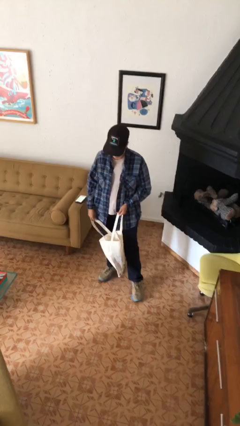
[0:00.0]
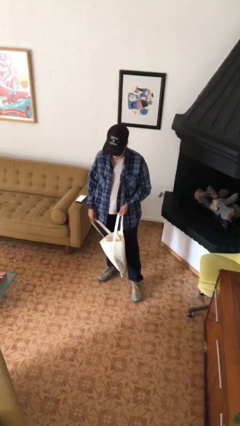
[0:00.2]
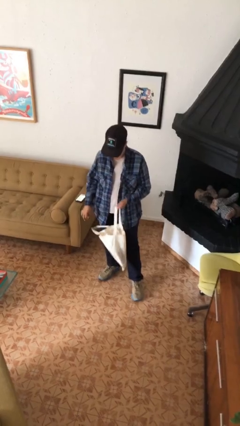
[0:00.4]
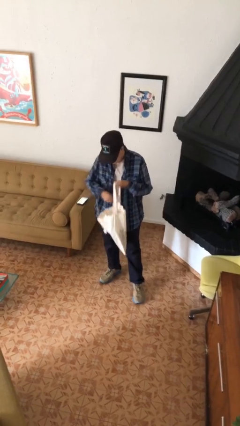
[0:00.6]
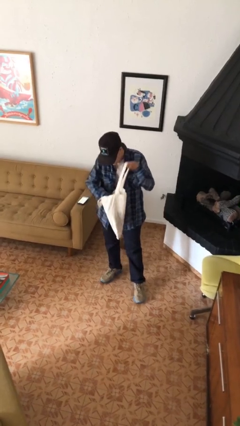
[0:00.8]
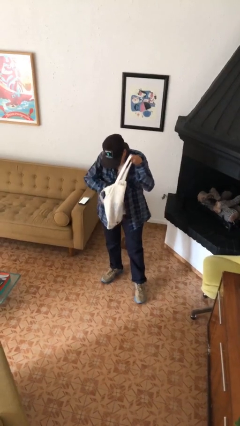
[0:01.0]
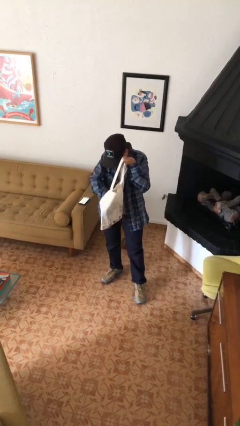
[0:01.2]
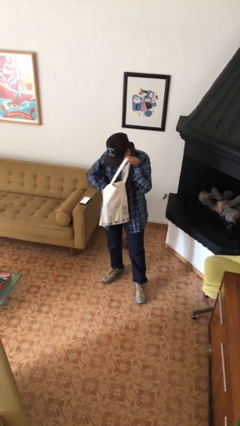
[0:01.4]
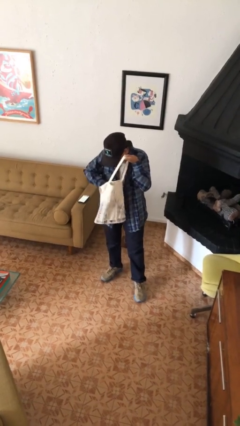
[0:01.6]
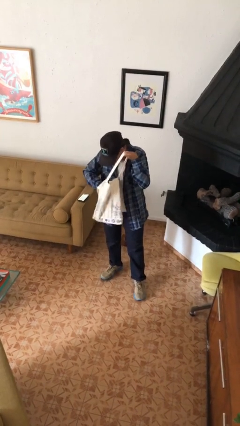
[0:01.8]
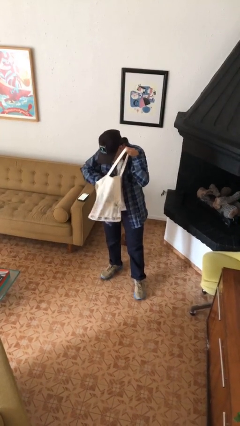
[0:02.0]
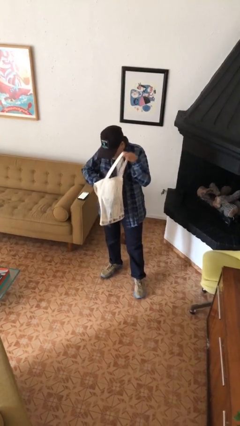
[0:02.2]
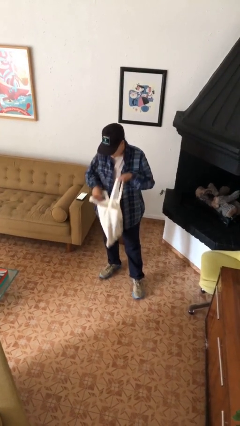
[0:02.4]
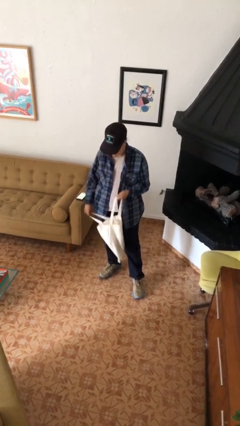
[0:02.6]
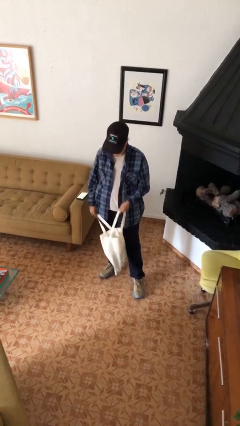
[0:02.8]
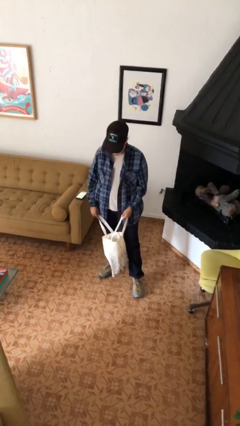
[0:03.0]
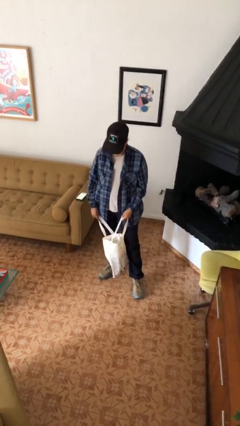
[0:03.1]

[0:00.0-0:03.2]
person searches in bag

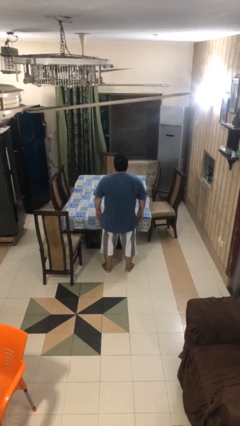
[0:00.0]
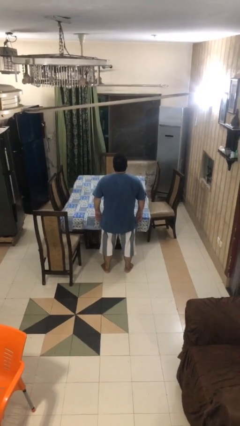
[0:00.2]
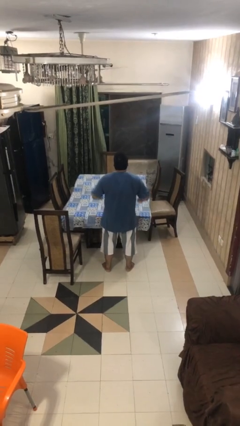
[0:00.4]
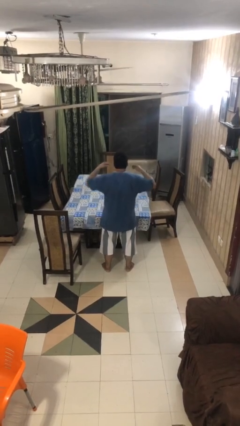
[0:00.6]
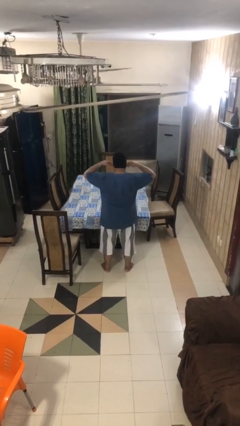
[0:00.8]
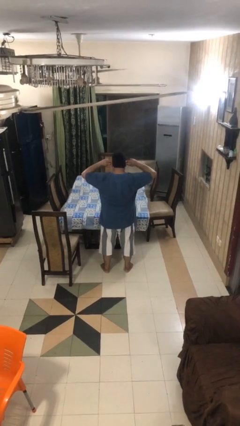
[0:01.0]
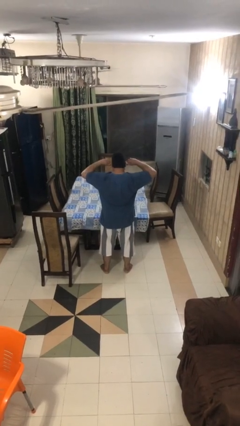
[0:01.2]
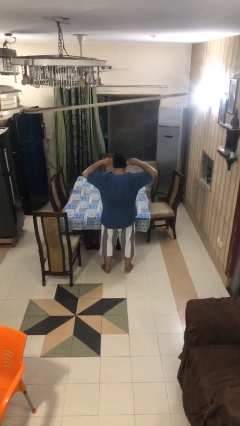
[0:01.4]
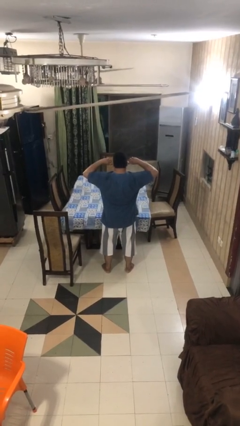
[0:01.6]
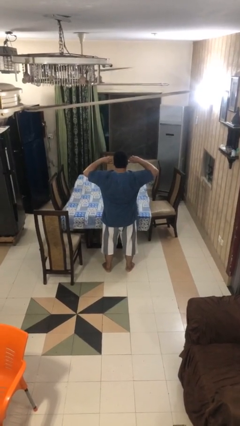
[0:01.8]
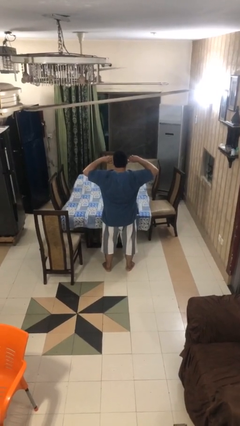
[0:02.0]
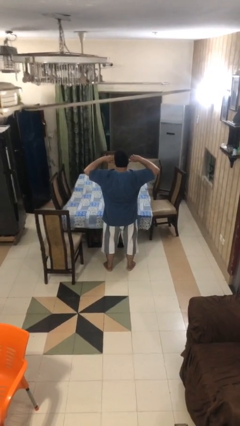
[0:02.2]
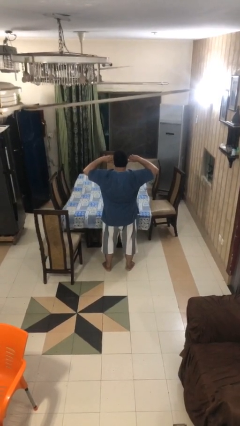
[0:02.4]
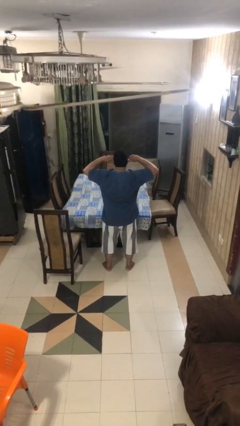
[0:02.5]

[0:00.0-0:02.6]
person puts fingers in ear

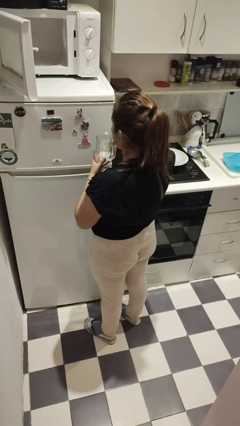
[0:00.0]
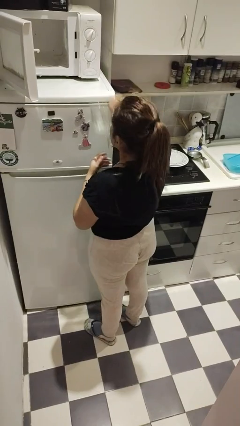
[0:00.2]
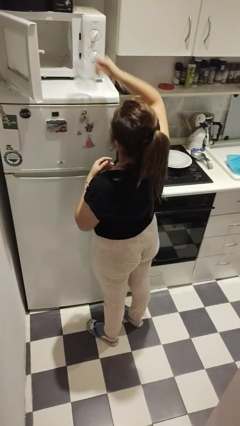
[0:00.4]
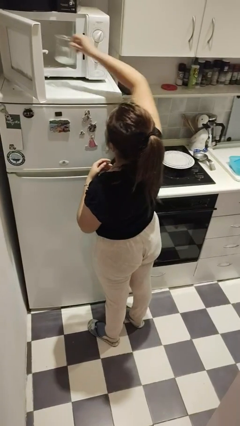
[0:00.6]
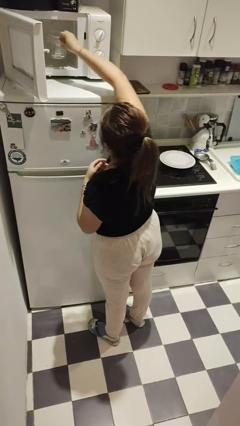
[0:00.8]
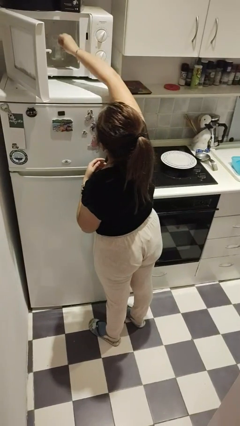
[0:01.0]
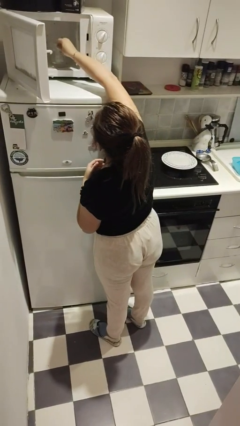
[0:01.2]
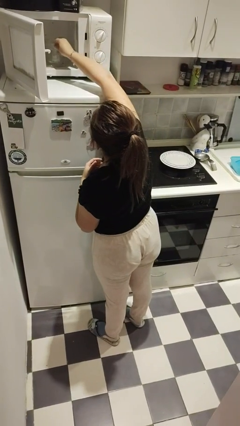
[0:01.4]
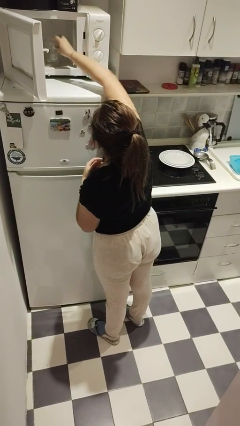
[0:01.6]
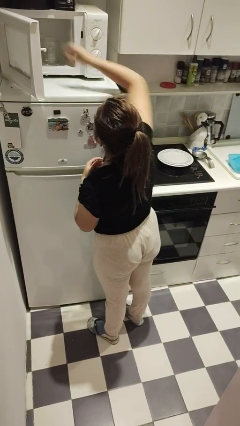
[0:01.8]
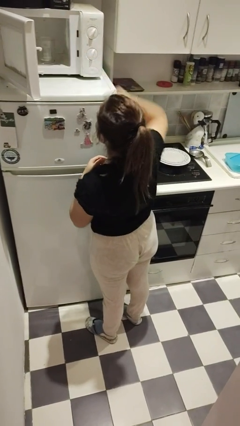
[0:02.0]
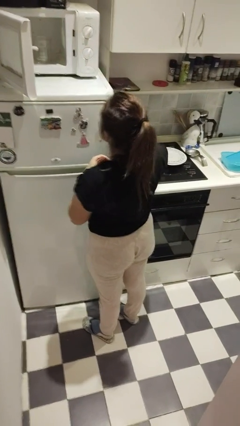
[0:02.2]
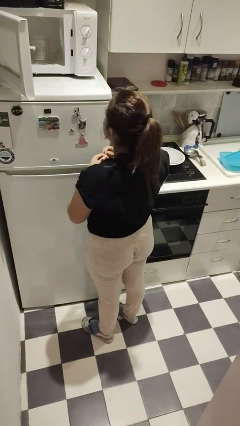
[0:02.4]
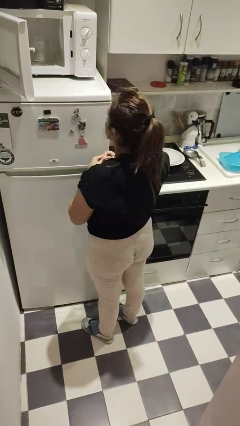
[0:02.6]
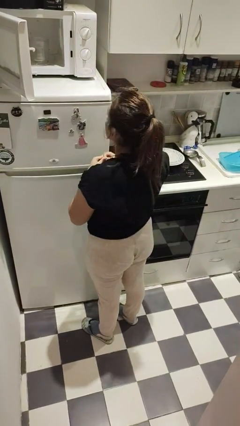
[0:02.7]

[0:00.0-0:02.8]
person puts object into microwave

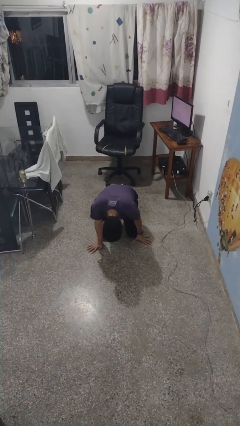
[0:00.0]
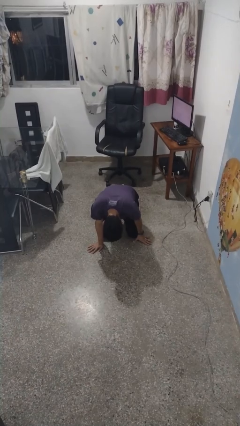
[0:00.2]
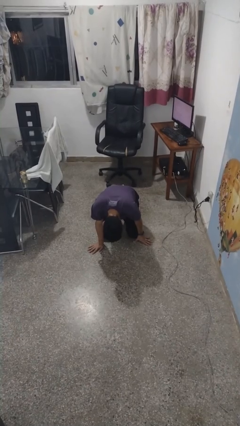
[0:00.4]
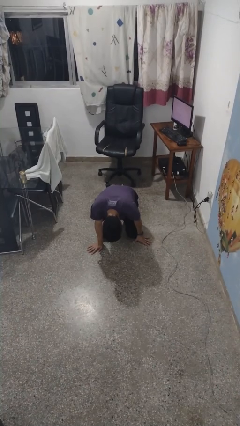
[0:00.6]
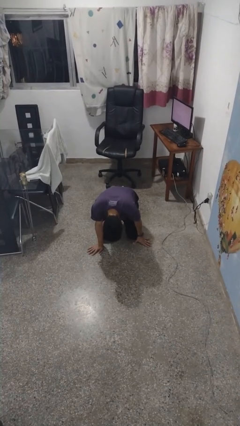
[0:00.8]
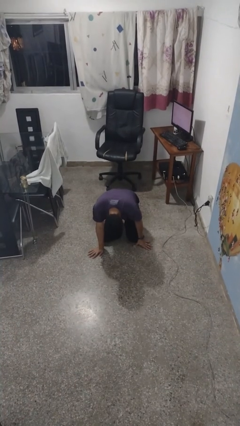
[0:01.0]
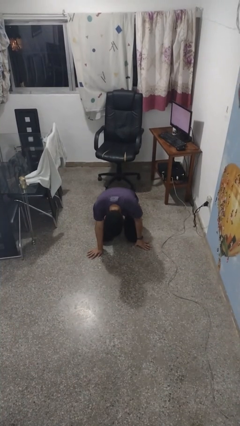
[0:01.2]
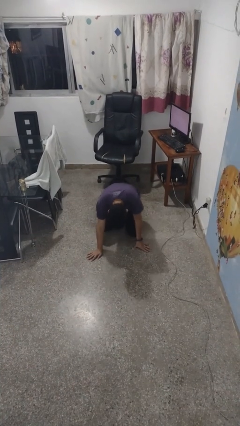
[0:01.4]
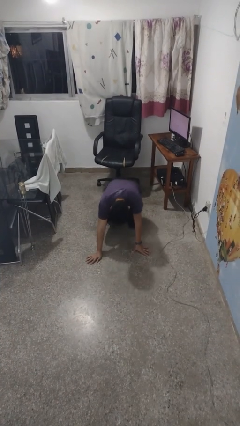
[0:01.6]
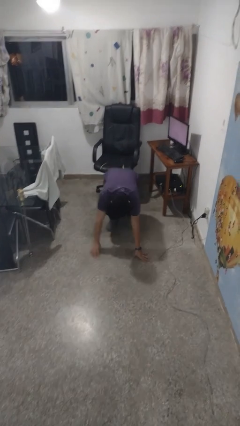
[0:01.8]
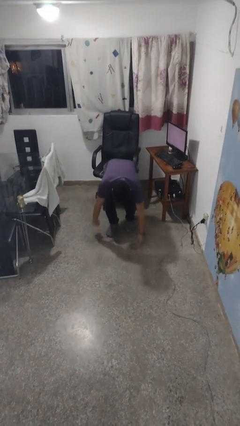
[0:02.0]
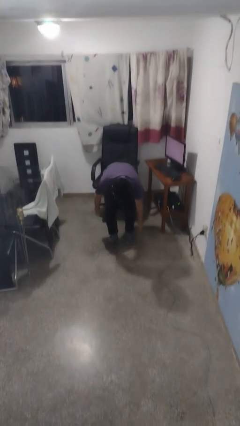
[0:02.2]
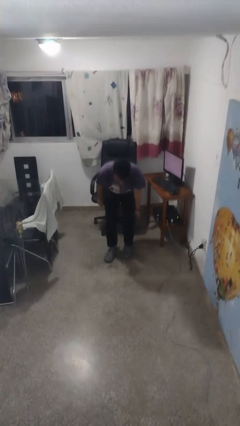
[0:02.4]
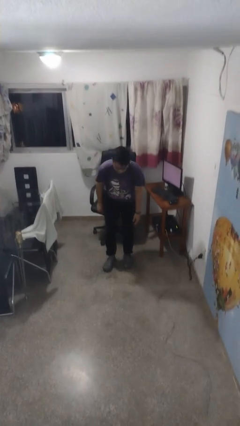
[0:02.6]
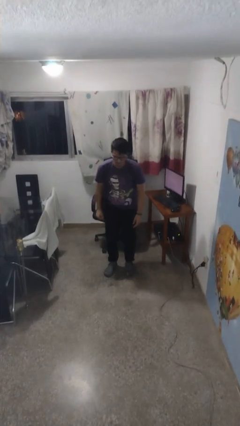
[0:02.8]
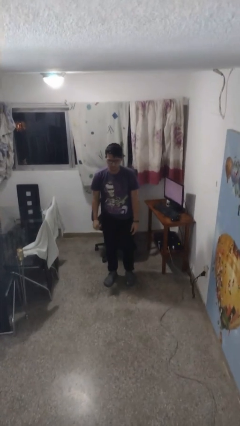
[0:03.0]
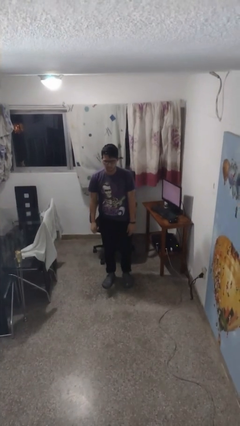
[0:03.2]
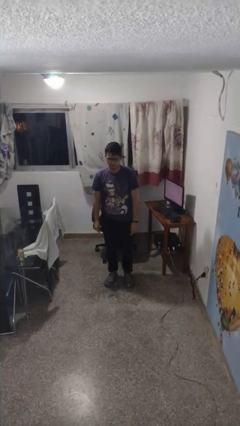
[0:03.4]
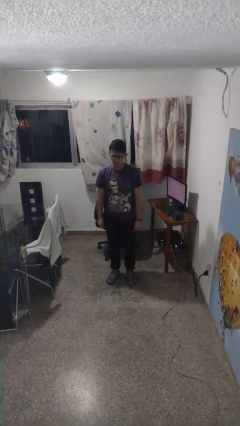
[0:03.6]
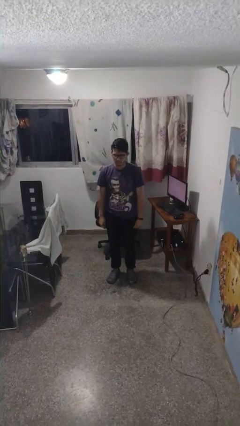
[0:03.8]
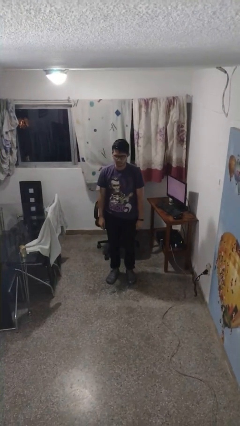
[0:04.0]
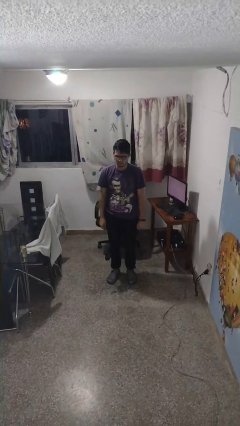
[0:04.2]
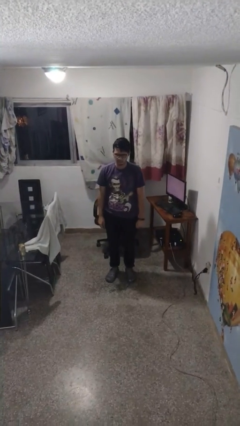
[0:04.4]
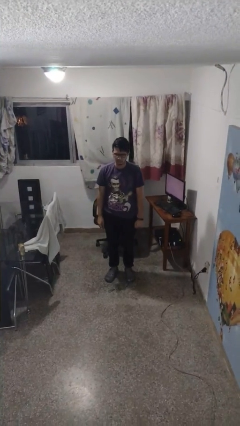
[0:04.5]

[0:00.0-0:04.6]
person stands up from floor

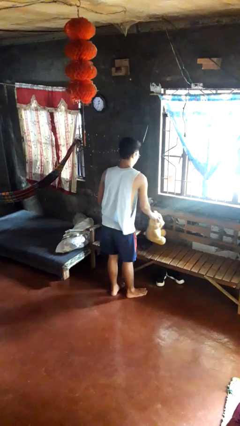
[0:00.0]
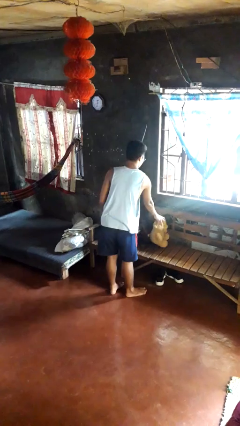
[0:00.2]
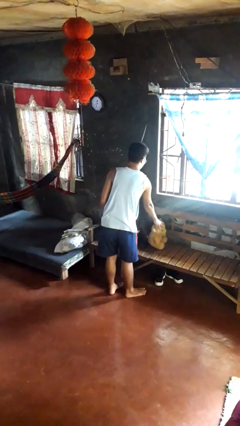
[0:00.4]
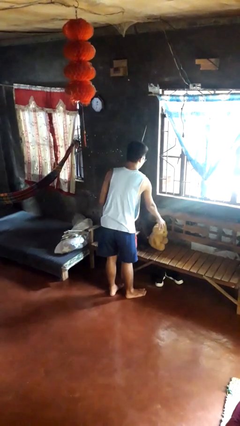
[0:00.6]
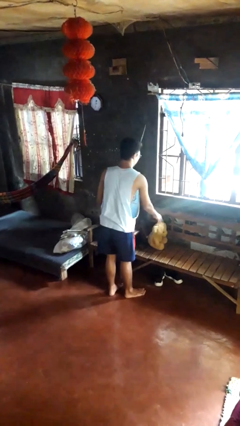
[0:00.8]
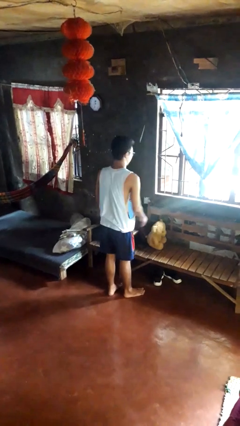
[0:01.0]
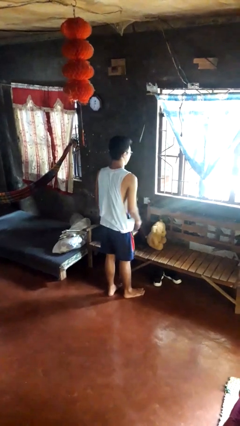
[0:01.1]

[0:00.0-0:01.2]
person puts down object on couch

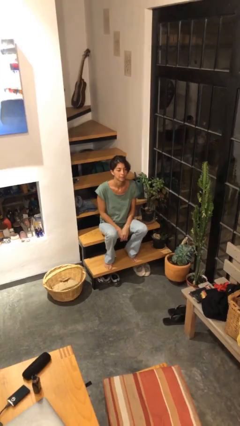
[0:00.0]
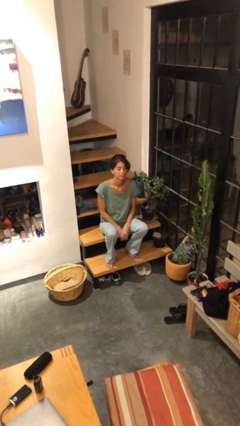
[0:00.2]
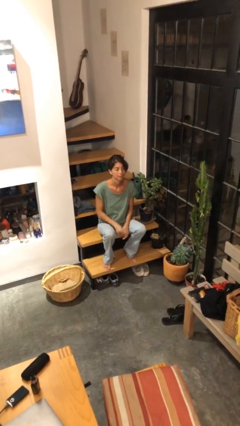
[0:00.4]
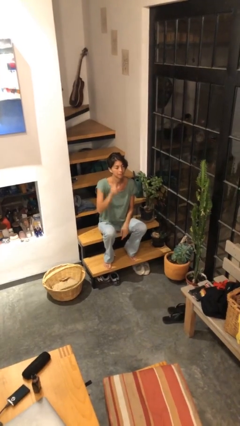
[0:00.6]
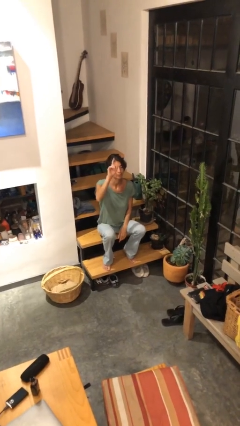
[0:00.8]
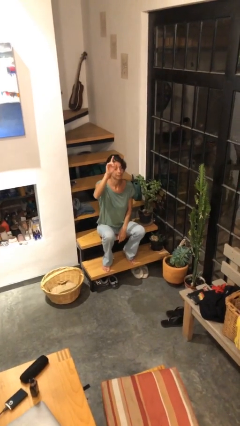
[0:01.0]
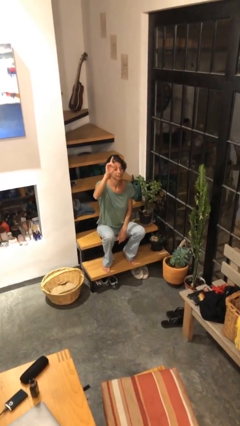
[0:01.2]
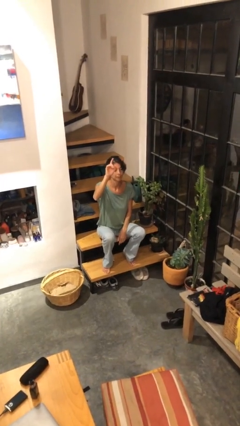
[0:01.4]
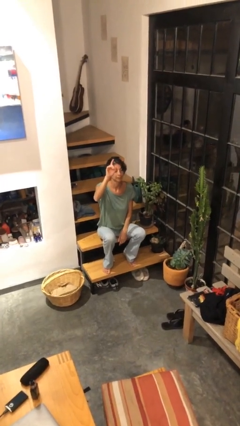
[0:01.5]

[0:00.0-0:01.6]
person gestures raise hand

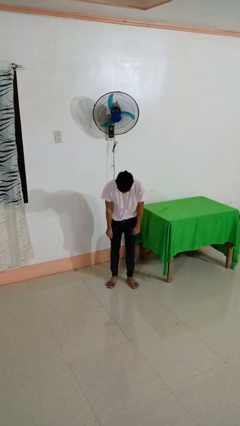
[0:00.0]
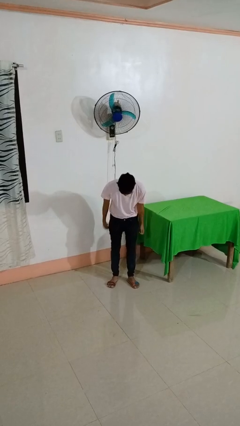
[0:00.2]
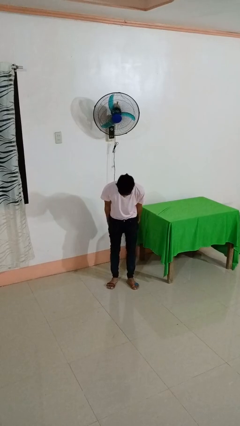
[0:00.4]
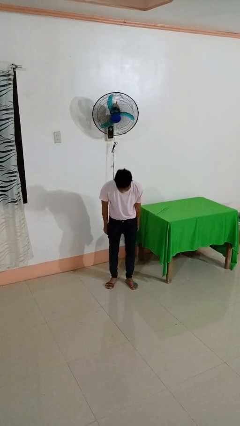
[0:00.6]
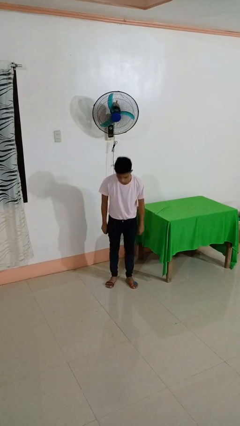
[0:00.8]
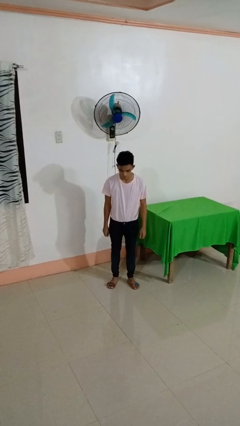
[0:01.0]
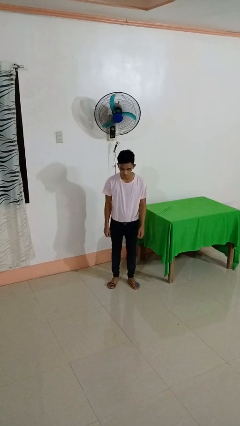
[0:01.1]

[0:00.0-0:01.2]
person hikes up pants
